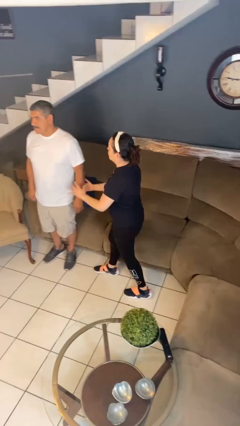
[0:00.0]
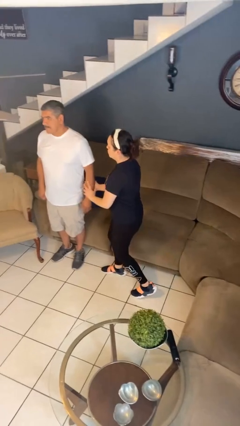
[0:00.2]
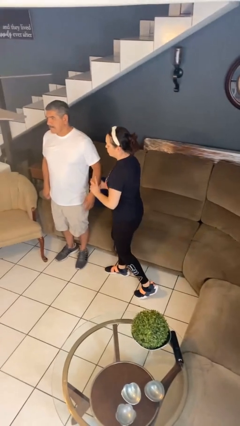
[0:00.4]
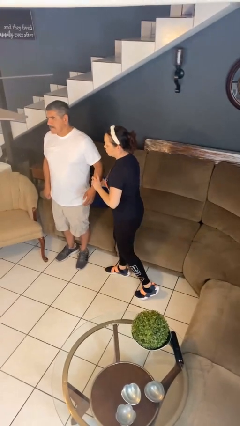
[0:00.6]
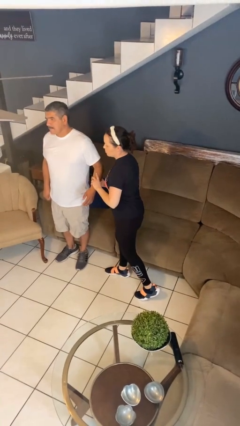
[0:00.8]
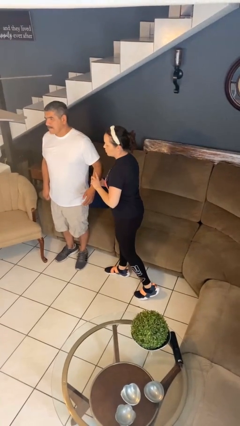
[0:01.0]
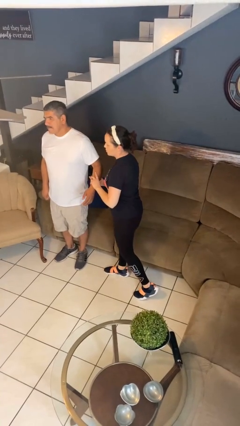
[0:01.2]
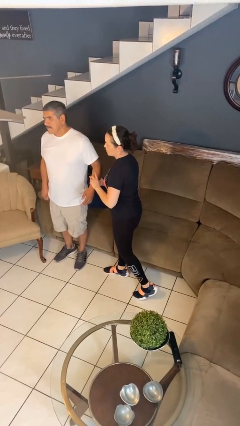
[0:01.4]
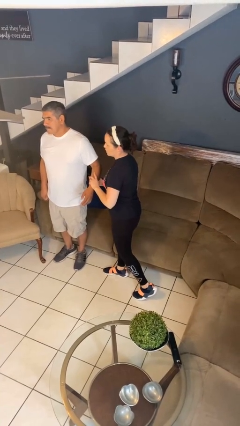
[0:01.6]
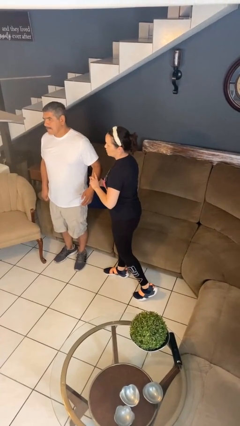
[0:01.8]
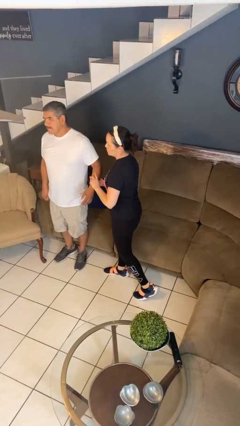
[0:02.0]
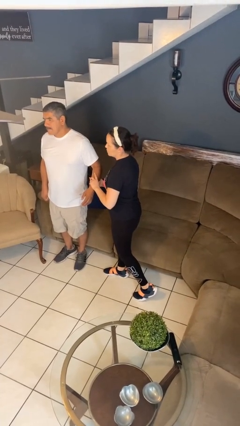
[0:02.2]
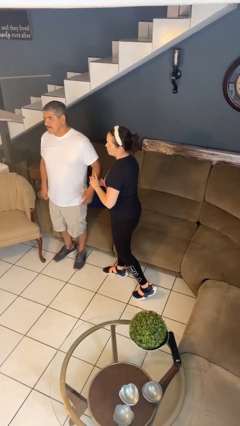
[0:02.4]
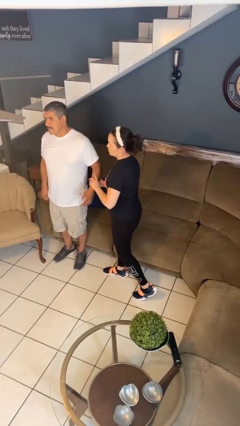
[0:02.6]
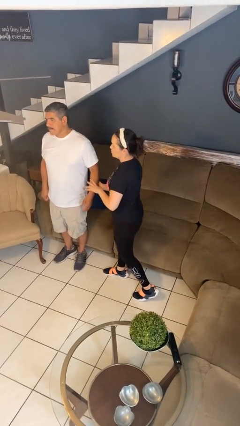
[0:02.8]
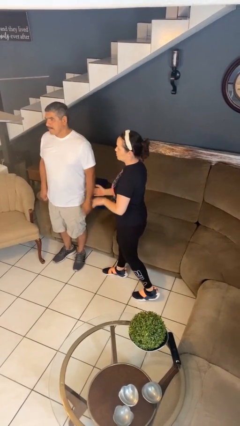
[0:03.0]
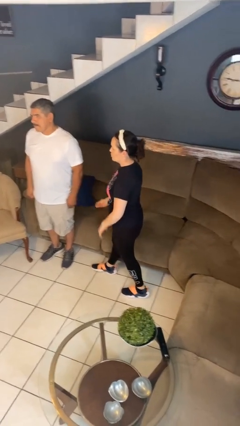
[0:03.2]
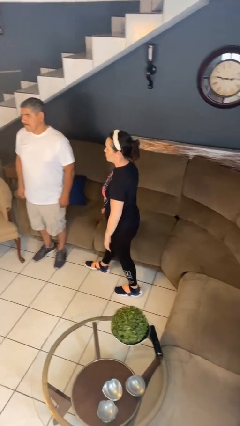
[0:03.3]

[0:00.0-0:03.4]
person grabs person by forearm

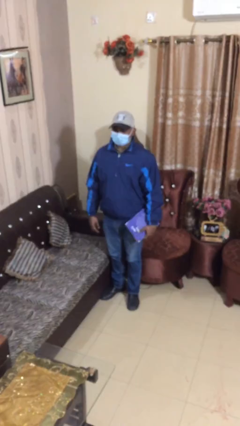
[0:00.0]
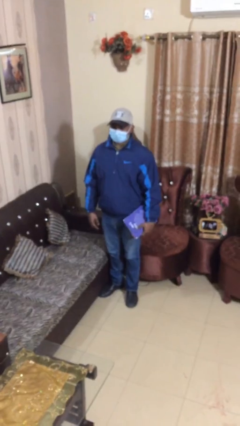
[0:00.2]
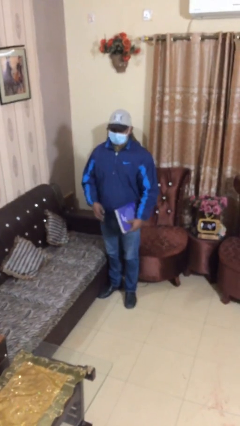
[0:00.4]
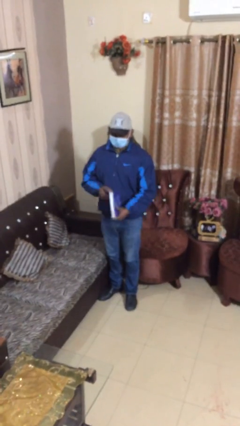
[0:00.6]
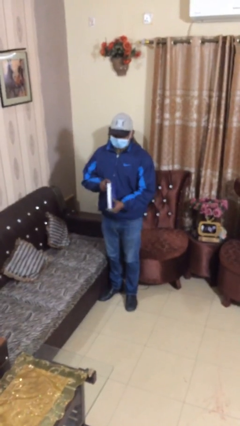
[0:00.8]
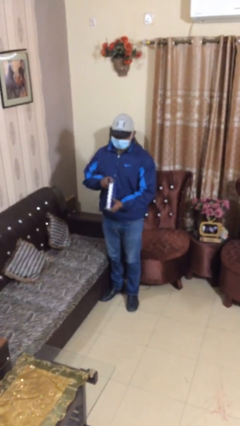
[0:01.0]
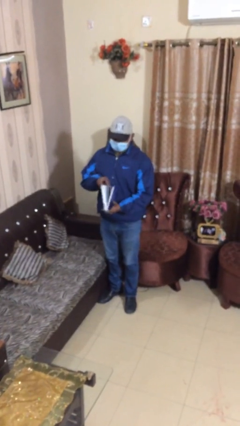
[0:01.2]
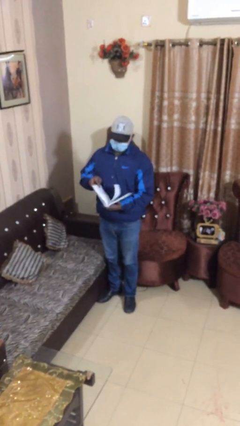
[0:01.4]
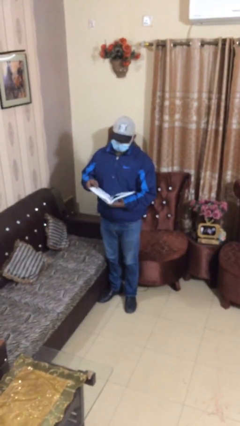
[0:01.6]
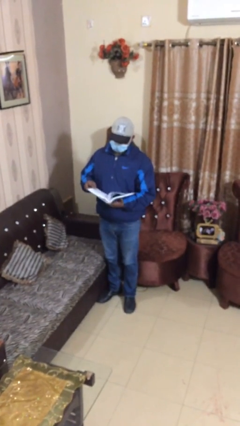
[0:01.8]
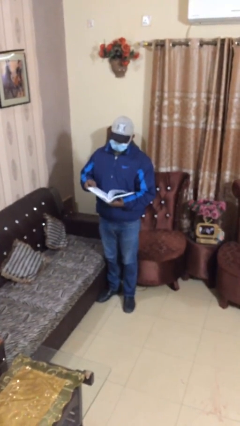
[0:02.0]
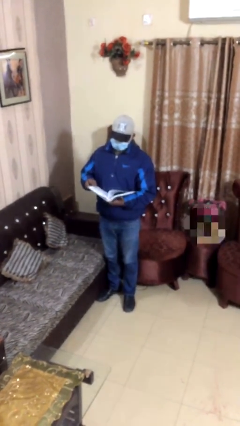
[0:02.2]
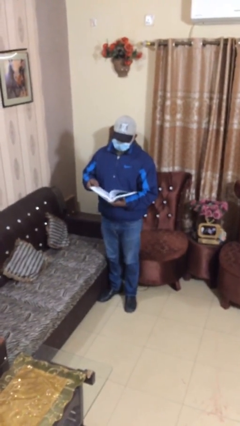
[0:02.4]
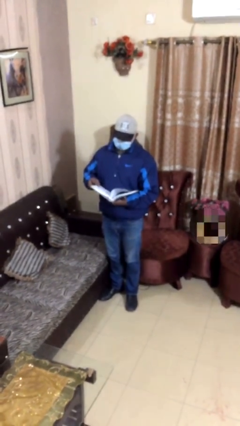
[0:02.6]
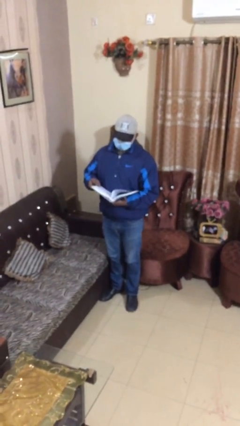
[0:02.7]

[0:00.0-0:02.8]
person reads document

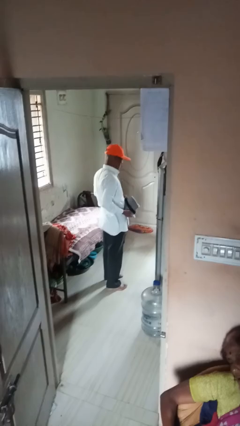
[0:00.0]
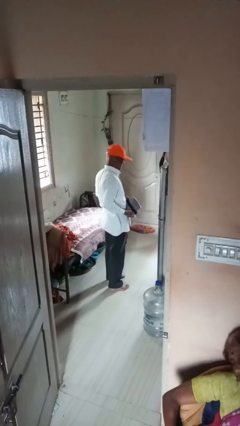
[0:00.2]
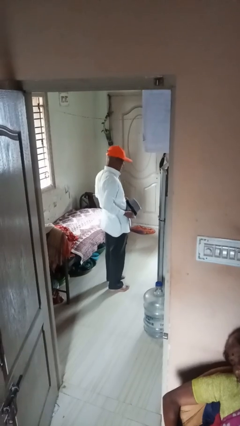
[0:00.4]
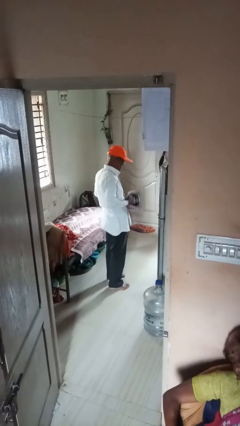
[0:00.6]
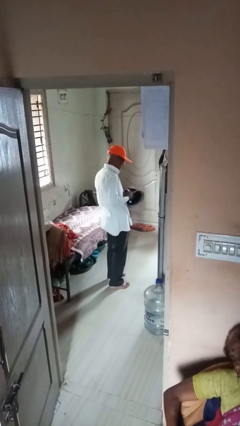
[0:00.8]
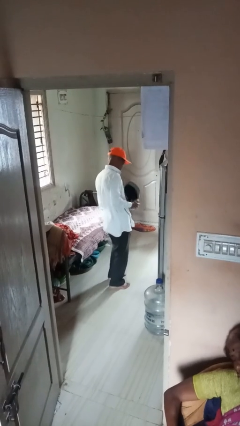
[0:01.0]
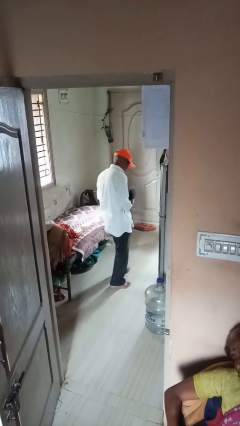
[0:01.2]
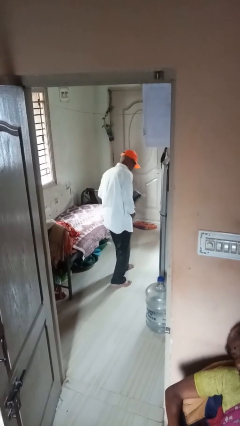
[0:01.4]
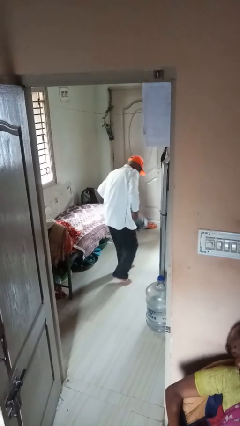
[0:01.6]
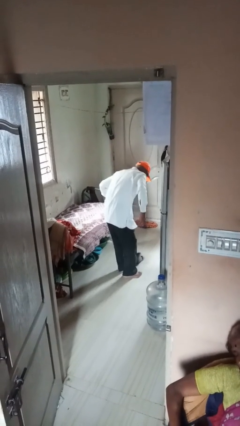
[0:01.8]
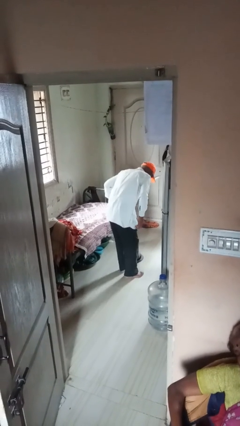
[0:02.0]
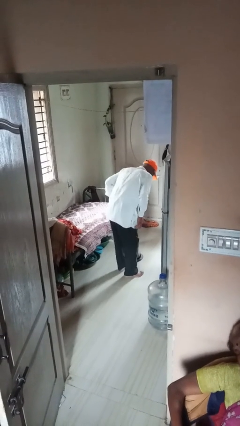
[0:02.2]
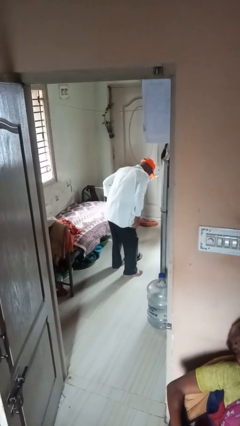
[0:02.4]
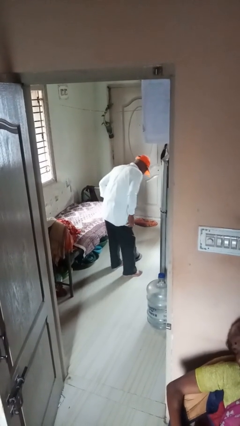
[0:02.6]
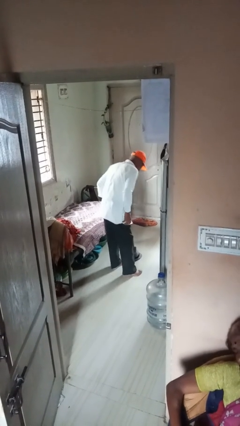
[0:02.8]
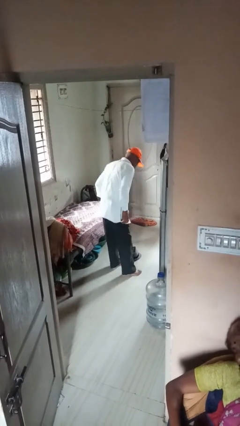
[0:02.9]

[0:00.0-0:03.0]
person drops object

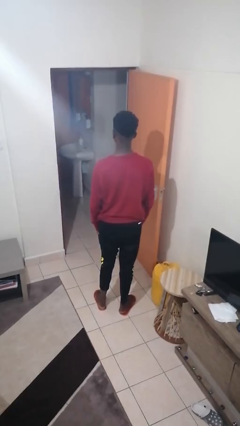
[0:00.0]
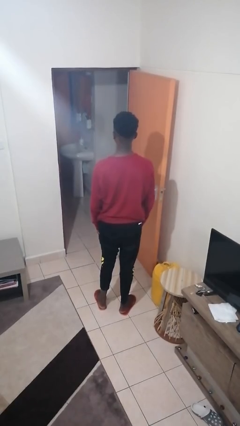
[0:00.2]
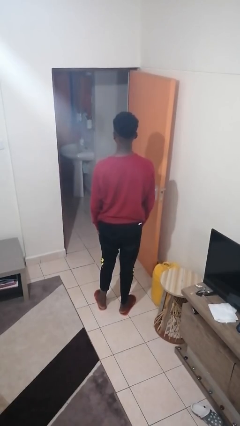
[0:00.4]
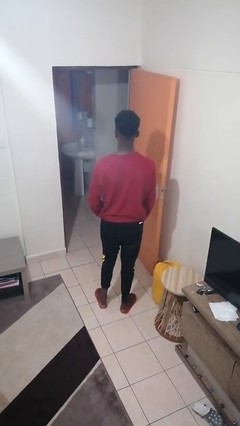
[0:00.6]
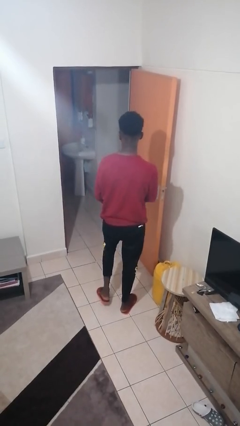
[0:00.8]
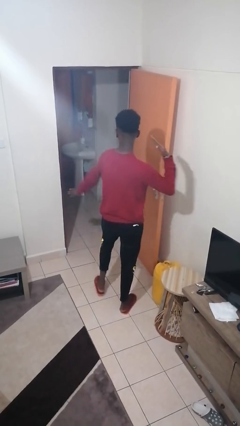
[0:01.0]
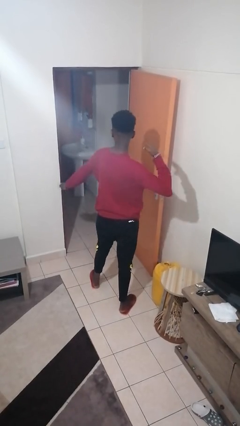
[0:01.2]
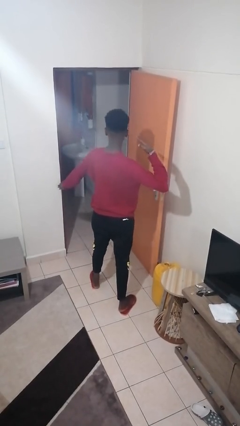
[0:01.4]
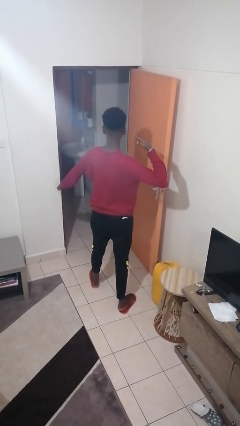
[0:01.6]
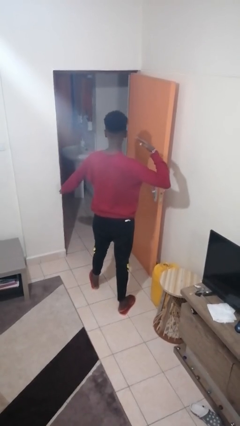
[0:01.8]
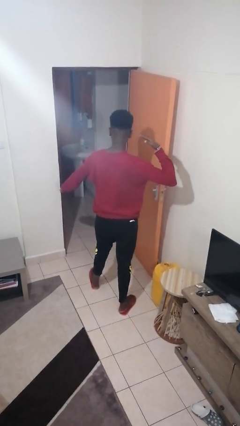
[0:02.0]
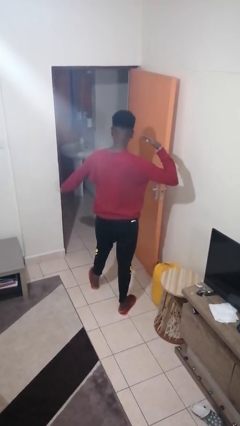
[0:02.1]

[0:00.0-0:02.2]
person karate chop

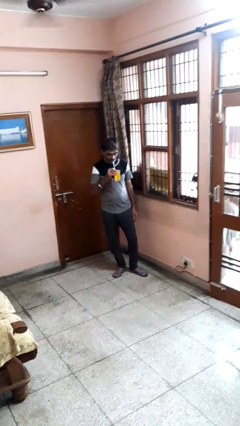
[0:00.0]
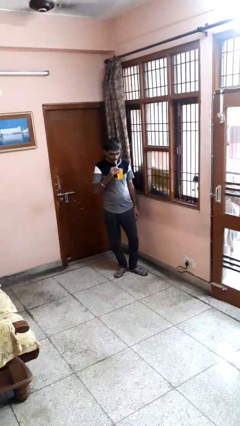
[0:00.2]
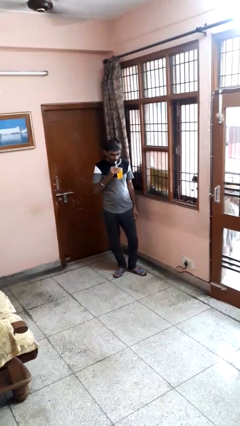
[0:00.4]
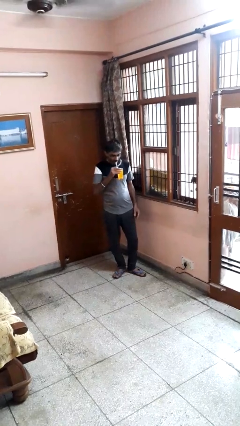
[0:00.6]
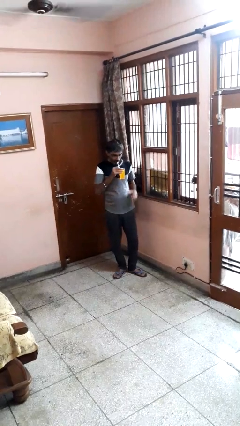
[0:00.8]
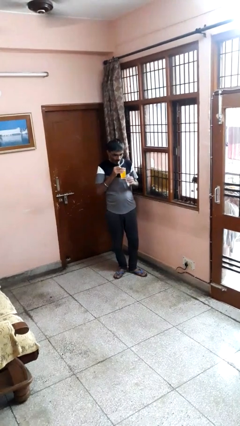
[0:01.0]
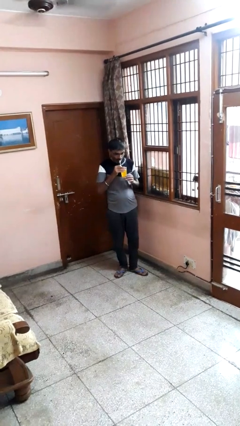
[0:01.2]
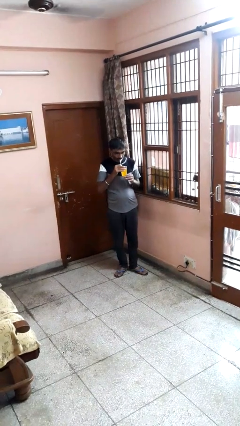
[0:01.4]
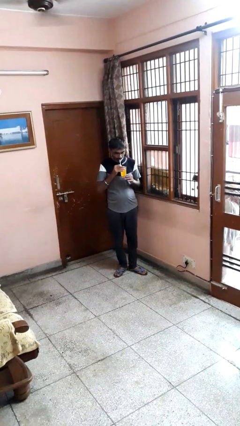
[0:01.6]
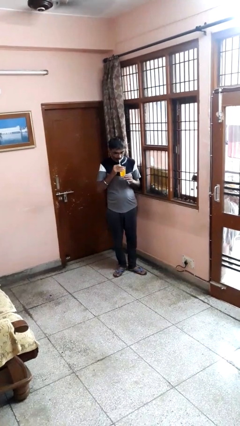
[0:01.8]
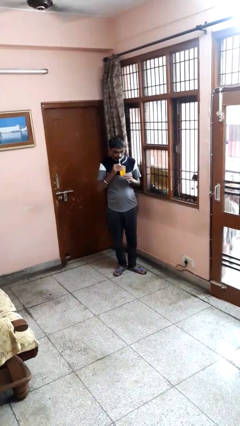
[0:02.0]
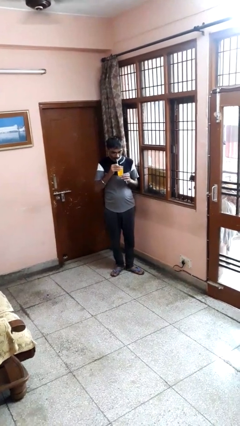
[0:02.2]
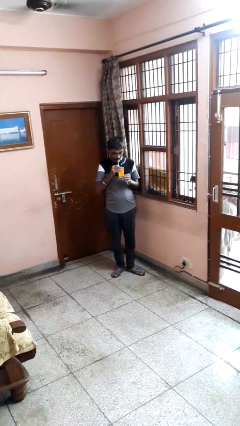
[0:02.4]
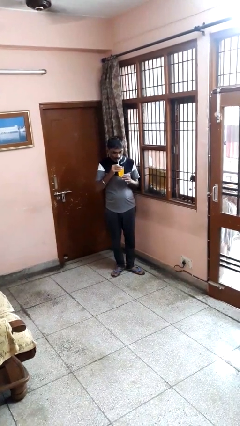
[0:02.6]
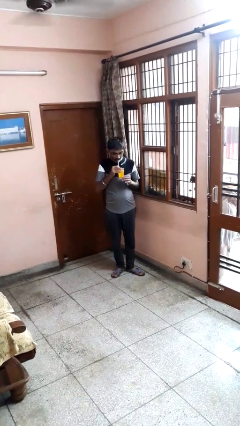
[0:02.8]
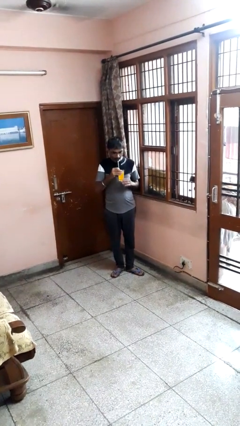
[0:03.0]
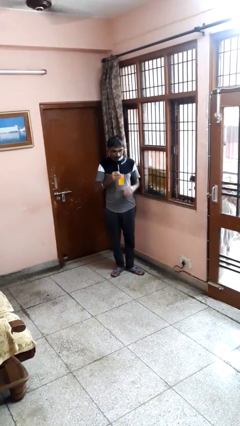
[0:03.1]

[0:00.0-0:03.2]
person drinks from straw

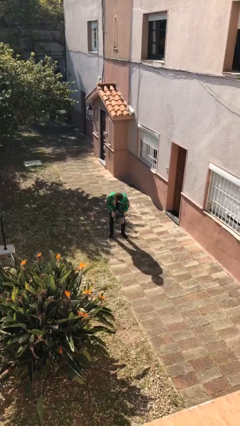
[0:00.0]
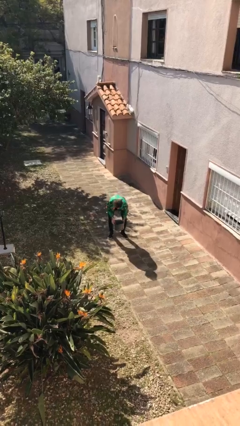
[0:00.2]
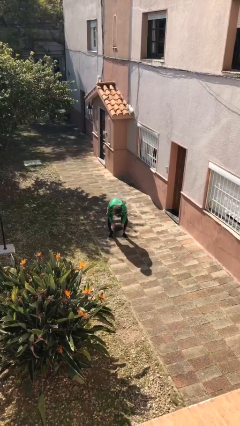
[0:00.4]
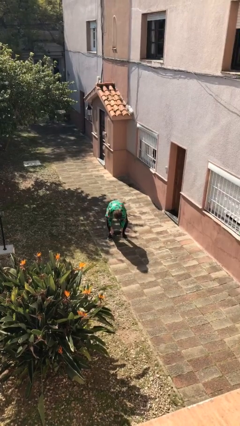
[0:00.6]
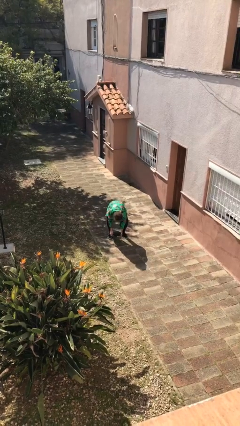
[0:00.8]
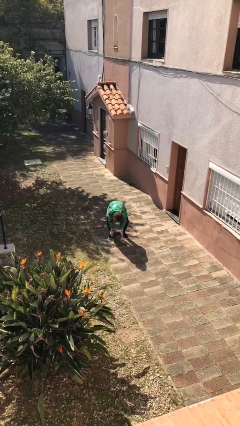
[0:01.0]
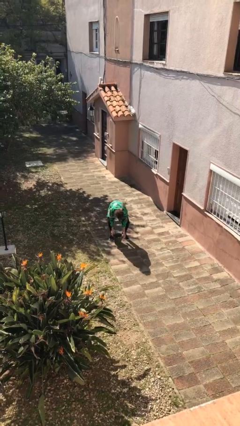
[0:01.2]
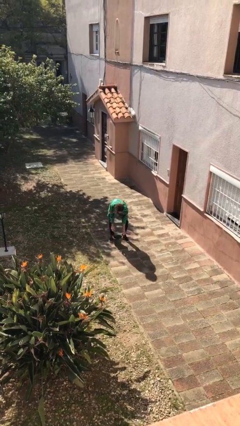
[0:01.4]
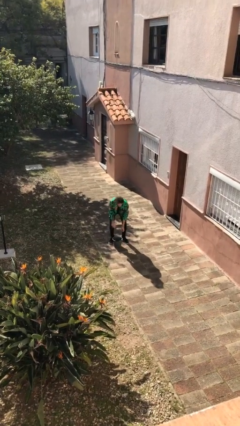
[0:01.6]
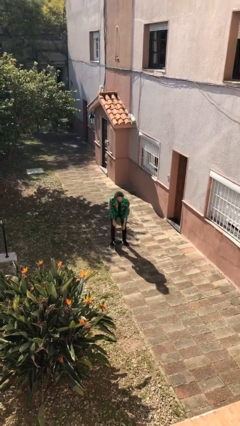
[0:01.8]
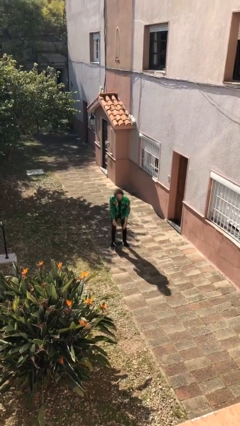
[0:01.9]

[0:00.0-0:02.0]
person puts down object on floor

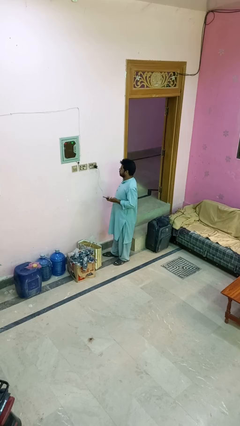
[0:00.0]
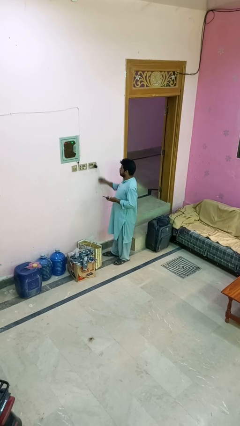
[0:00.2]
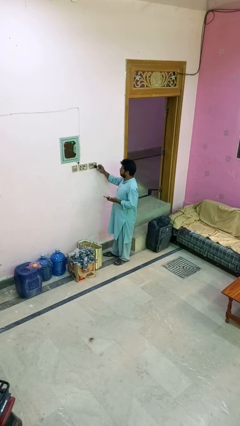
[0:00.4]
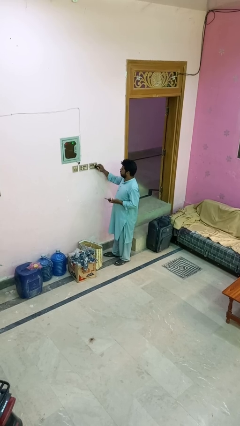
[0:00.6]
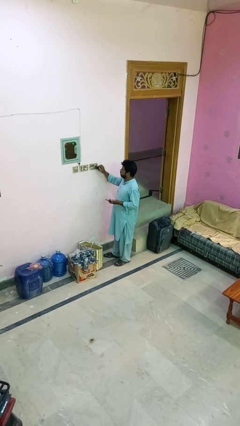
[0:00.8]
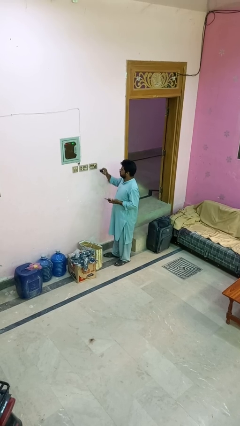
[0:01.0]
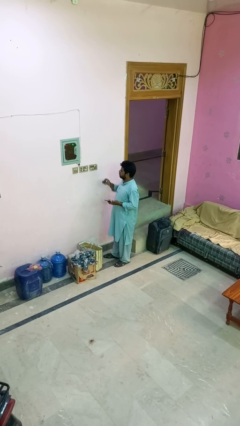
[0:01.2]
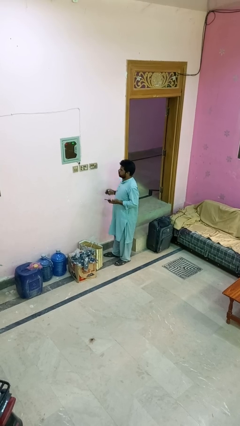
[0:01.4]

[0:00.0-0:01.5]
person unplugs from electrical socket
